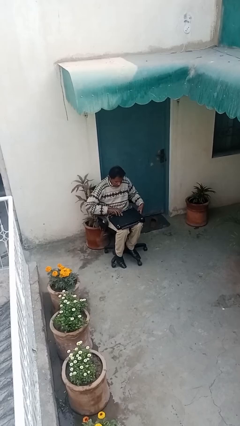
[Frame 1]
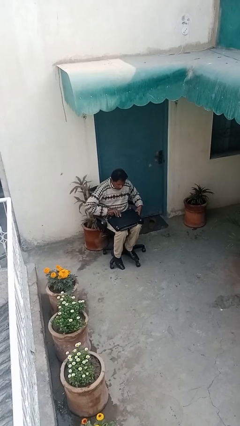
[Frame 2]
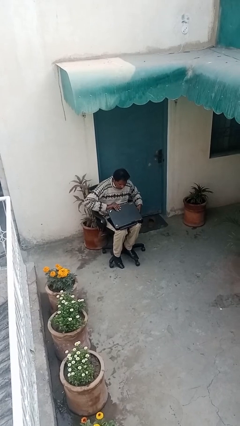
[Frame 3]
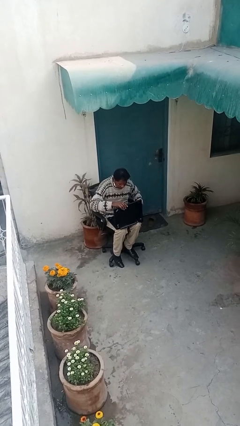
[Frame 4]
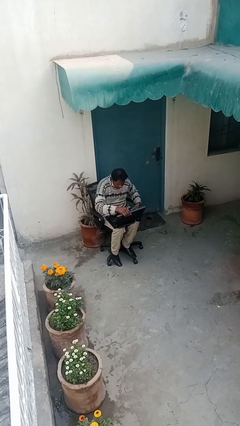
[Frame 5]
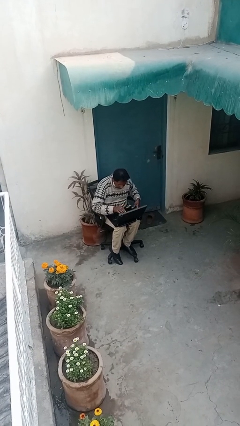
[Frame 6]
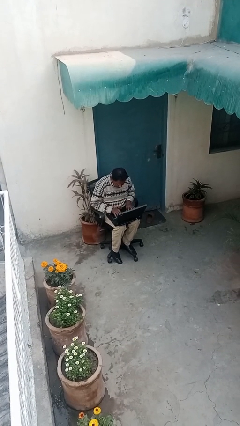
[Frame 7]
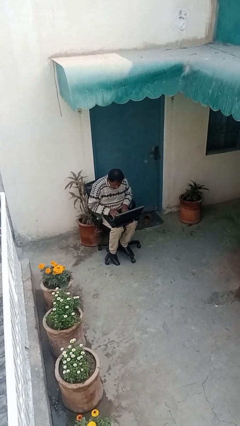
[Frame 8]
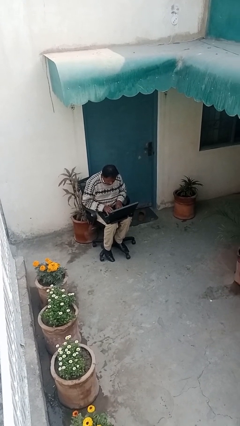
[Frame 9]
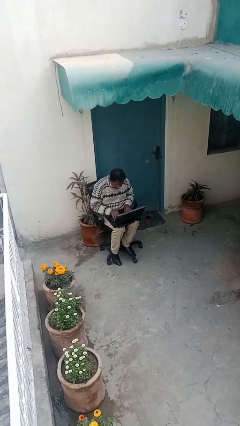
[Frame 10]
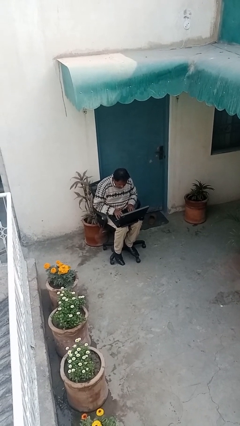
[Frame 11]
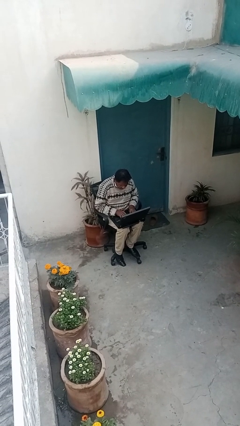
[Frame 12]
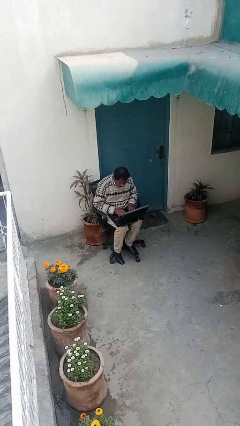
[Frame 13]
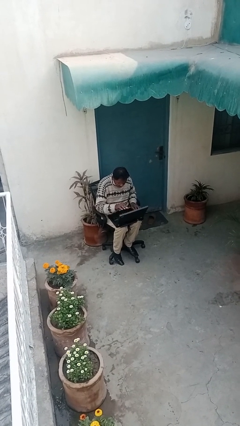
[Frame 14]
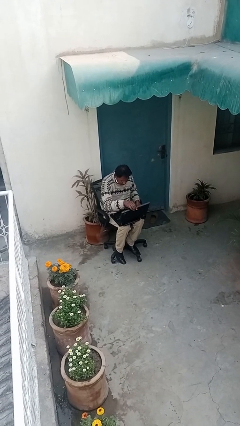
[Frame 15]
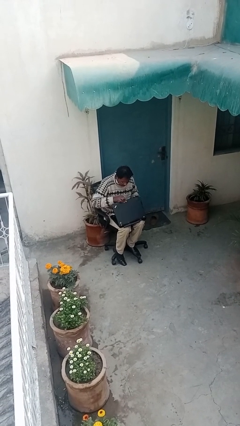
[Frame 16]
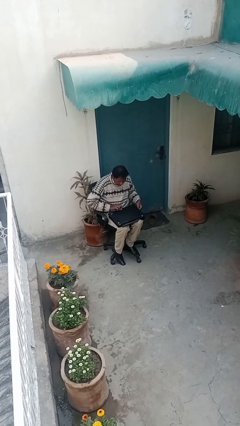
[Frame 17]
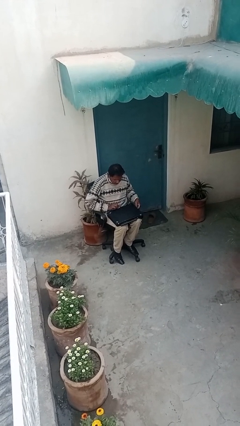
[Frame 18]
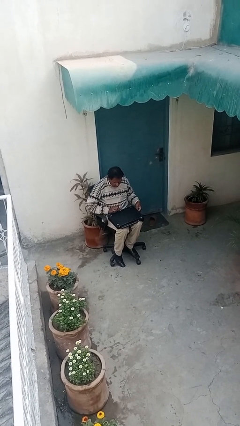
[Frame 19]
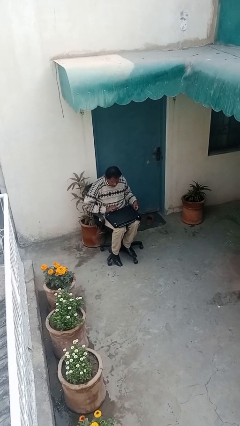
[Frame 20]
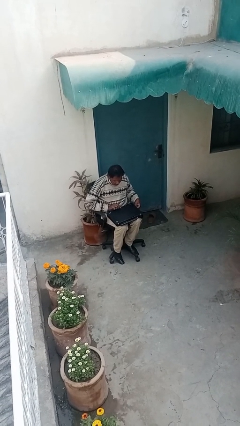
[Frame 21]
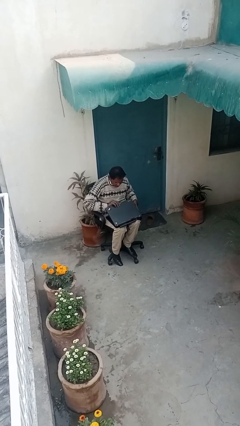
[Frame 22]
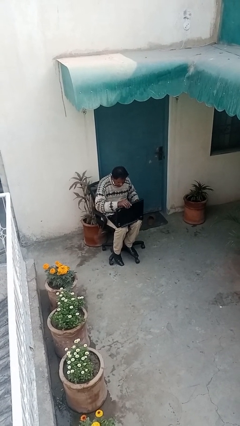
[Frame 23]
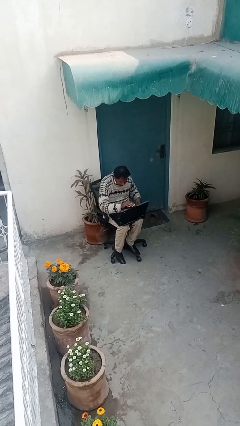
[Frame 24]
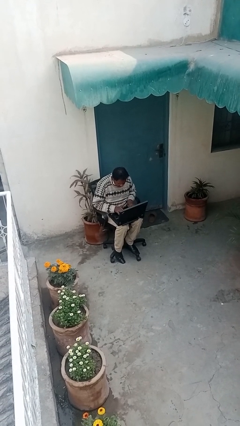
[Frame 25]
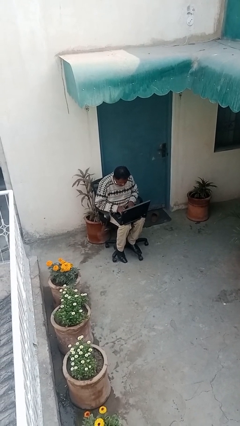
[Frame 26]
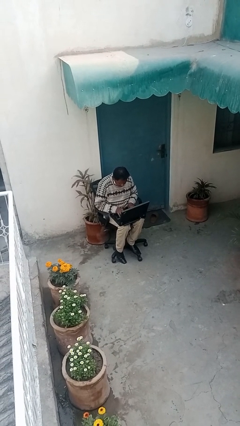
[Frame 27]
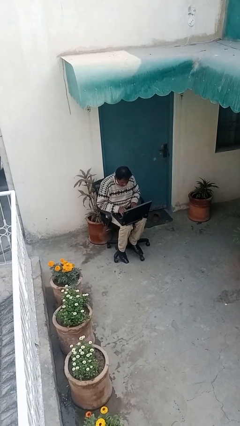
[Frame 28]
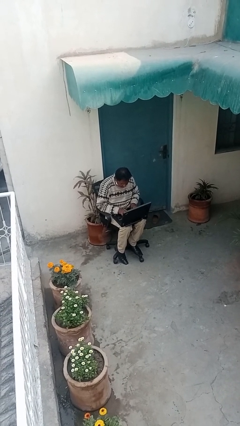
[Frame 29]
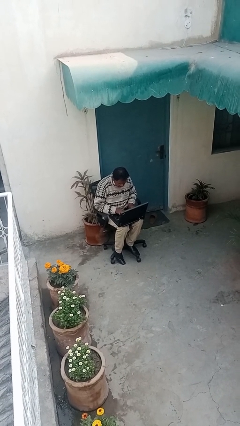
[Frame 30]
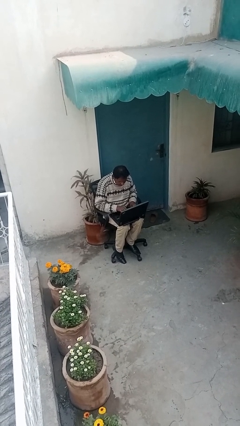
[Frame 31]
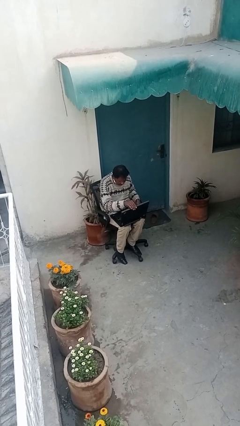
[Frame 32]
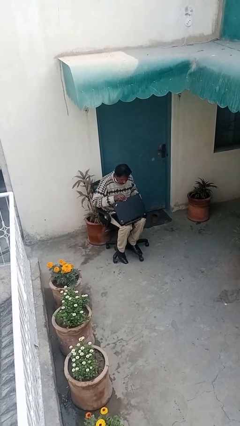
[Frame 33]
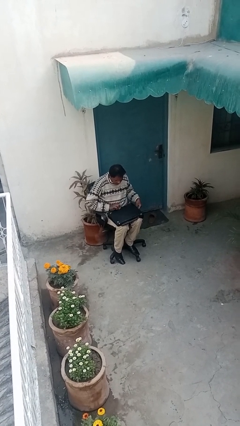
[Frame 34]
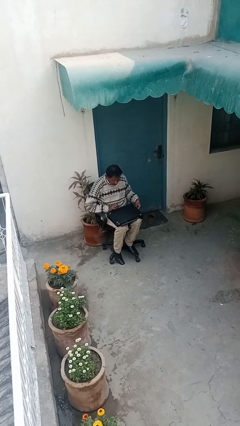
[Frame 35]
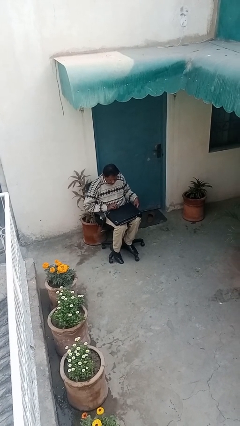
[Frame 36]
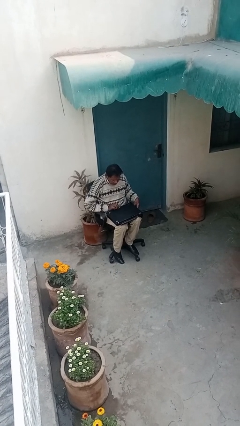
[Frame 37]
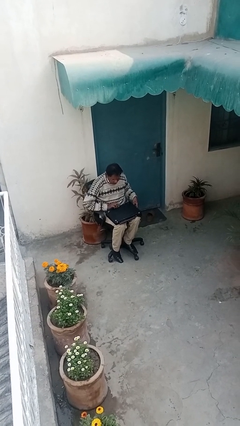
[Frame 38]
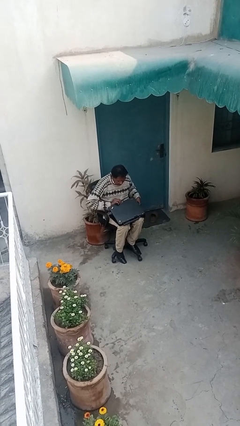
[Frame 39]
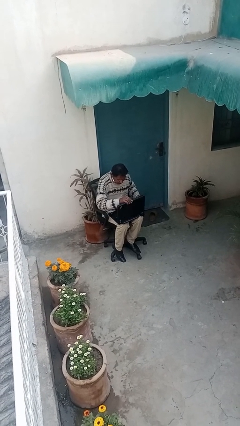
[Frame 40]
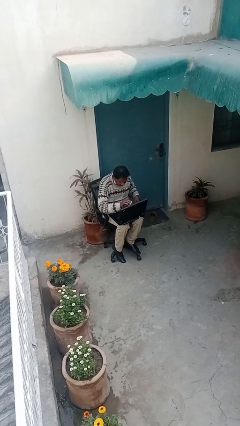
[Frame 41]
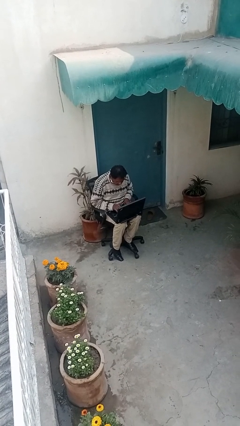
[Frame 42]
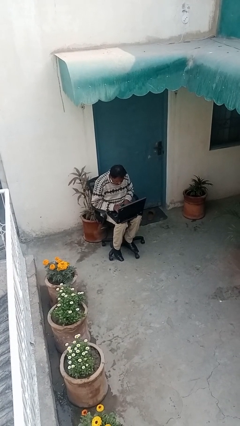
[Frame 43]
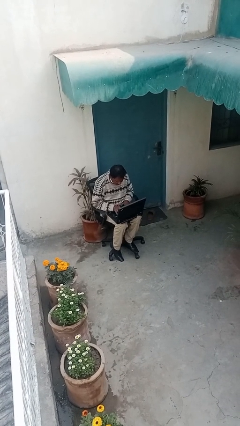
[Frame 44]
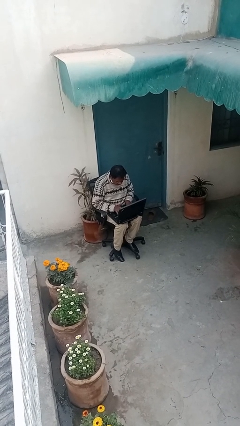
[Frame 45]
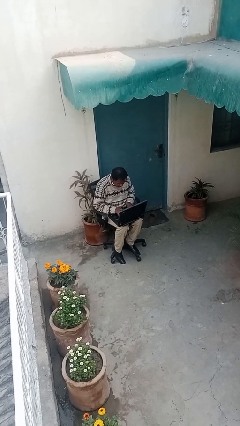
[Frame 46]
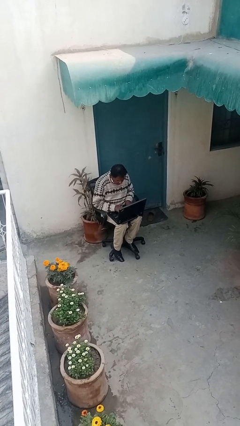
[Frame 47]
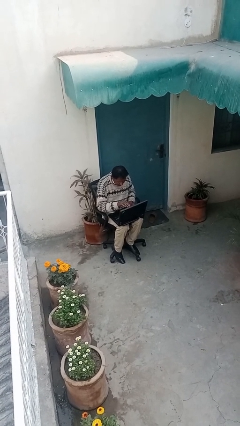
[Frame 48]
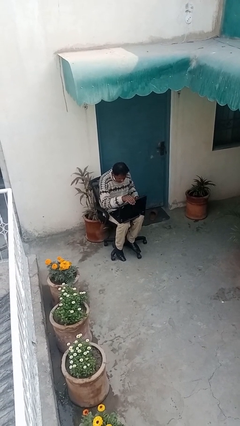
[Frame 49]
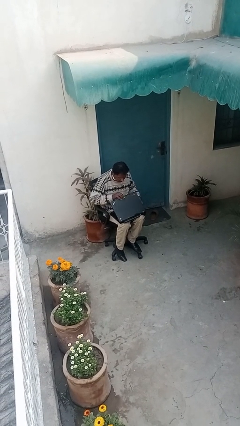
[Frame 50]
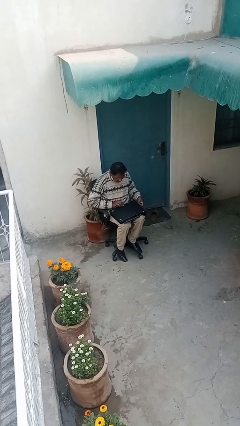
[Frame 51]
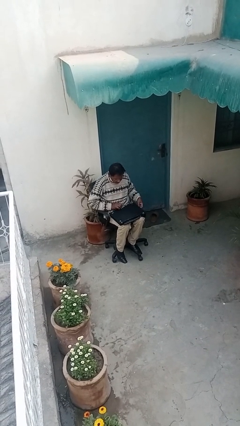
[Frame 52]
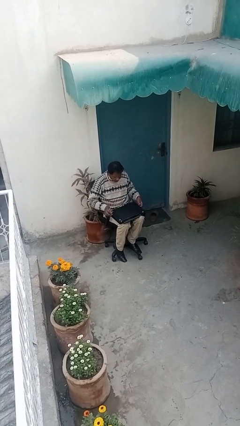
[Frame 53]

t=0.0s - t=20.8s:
person interacts with laptop

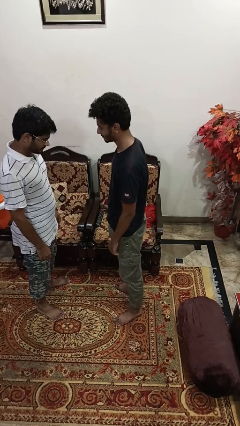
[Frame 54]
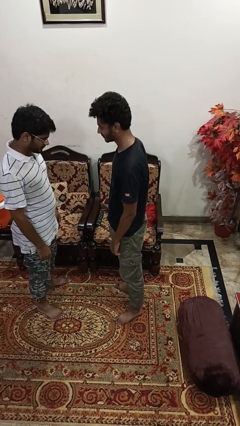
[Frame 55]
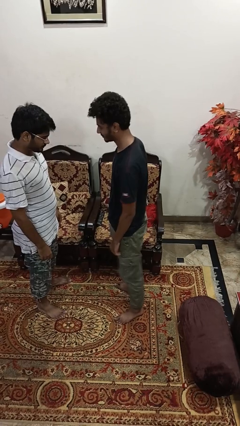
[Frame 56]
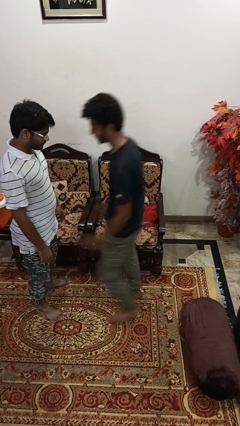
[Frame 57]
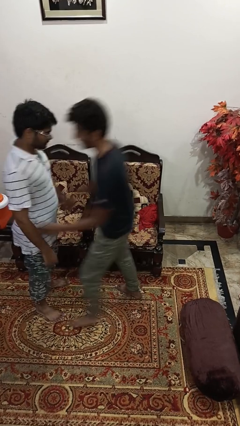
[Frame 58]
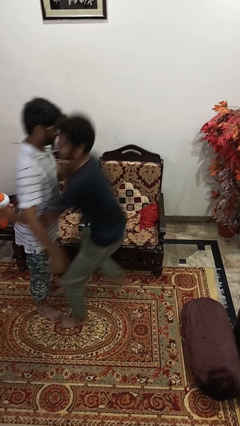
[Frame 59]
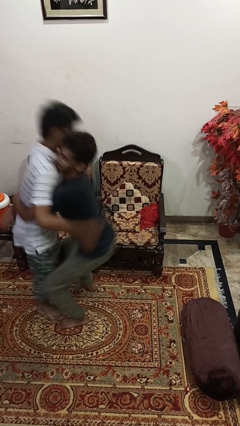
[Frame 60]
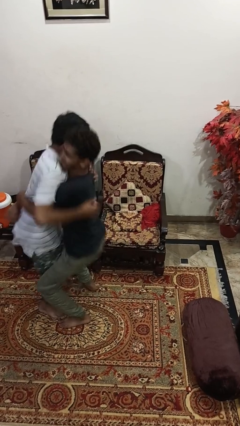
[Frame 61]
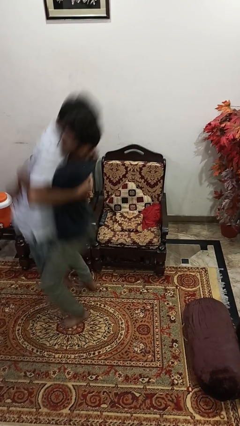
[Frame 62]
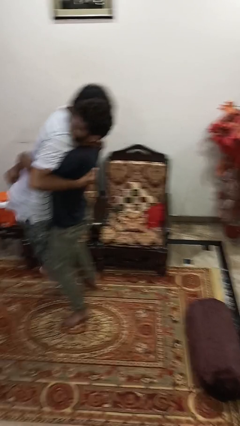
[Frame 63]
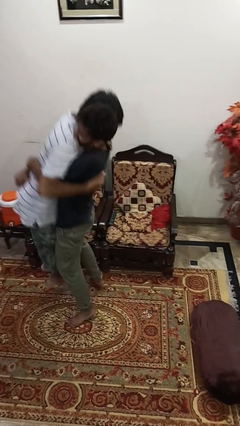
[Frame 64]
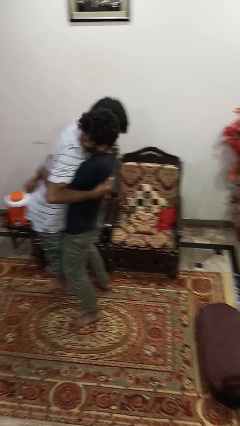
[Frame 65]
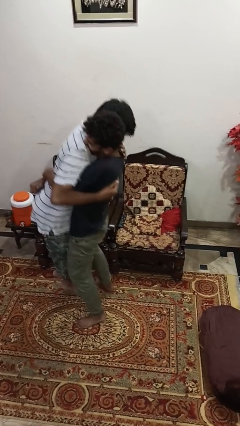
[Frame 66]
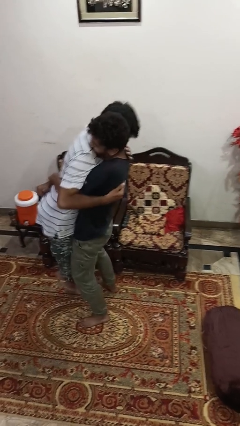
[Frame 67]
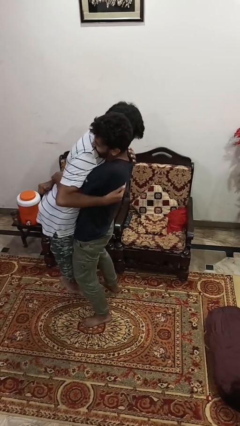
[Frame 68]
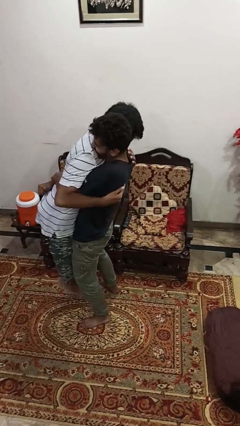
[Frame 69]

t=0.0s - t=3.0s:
person picks up person

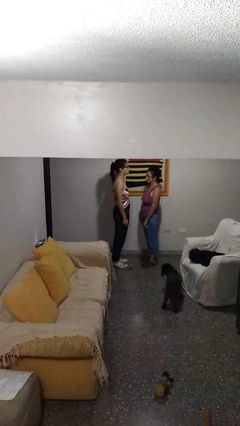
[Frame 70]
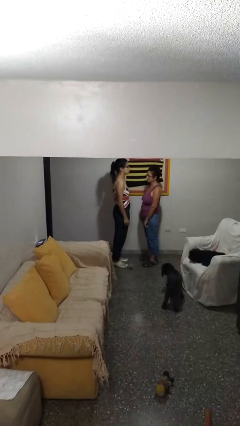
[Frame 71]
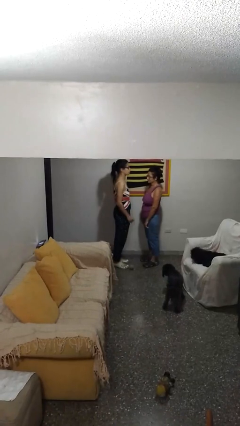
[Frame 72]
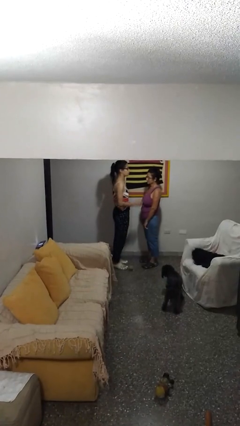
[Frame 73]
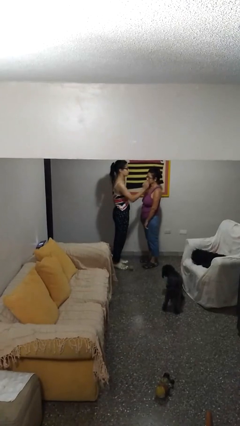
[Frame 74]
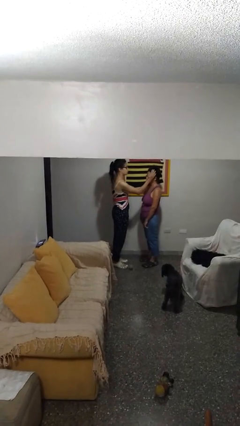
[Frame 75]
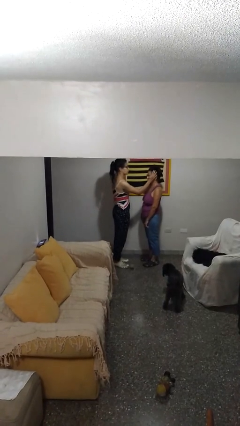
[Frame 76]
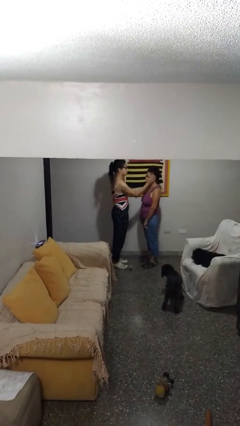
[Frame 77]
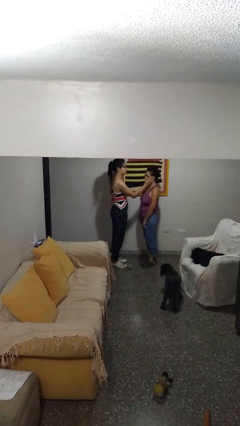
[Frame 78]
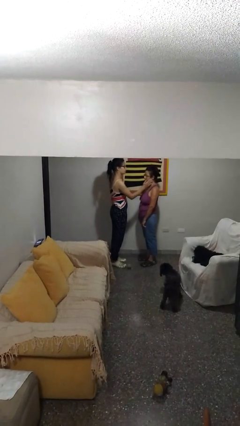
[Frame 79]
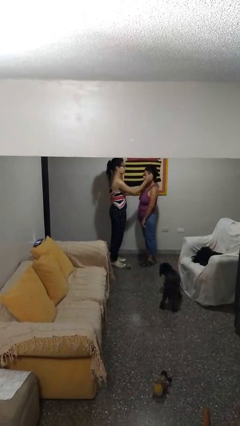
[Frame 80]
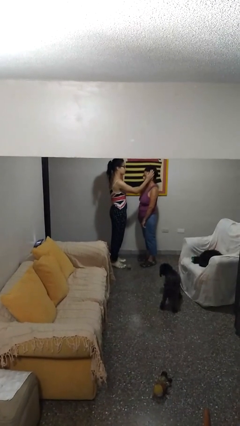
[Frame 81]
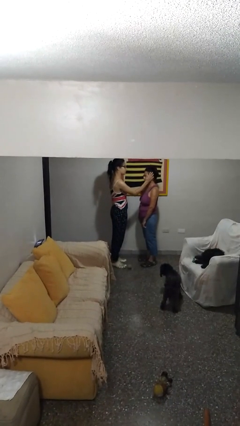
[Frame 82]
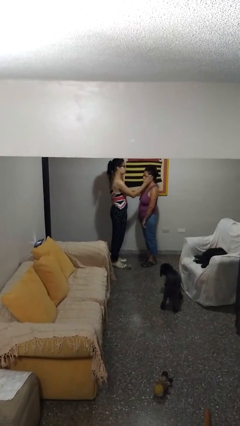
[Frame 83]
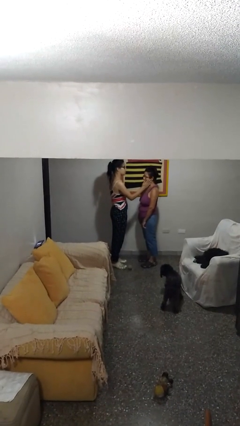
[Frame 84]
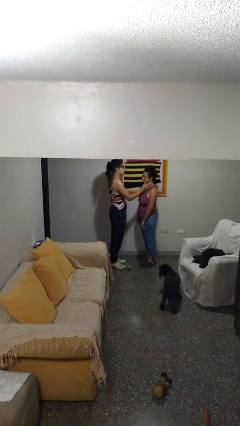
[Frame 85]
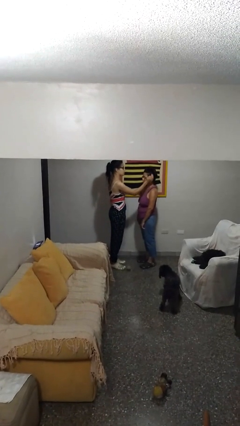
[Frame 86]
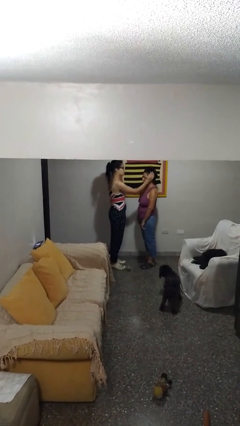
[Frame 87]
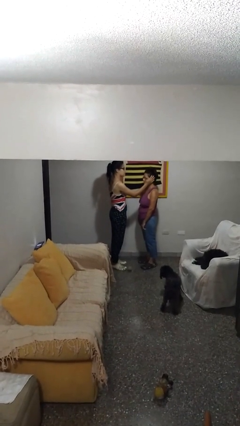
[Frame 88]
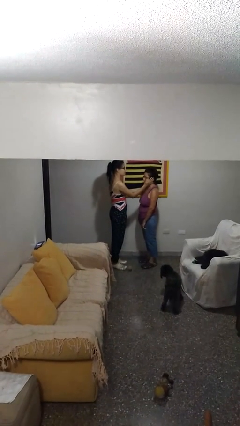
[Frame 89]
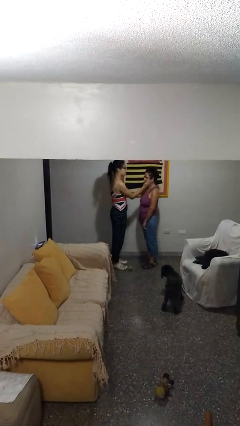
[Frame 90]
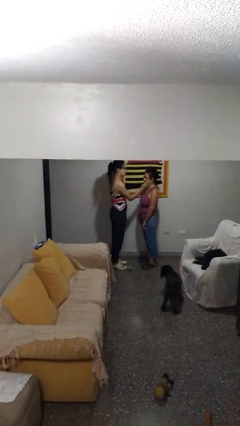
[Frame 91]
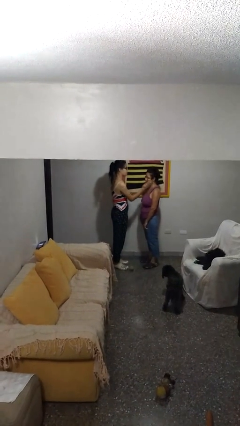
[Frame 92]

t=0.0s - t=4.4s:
person touches face of person

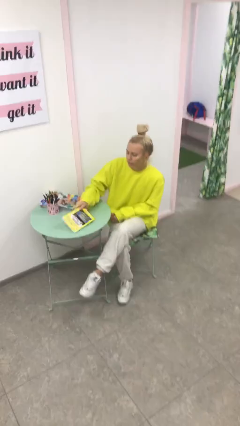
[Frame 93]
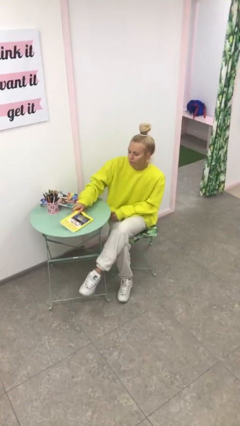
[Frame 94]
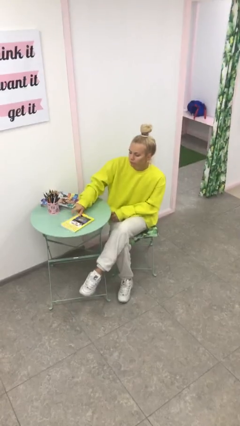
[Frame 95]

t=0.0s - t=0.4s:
person puts down object on table
